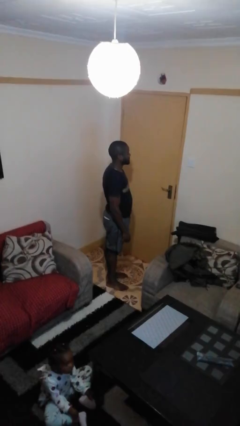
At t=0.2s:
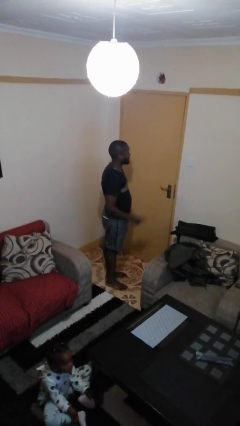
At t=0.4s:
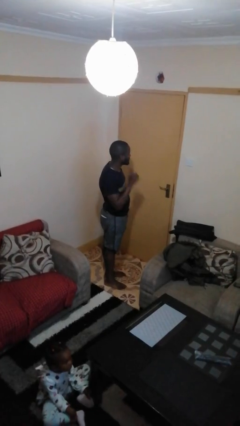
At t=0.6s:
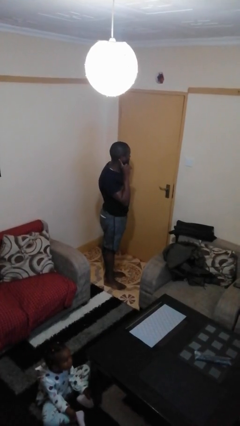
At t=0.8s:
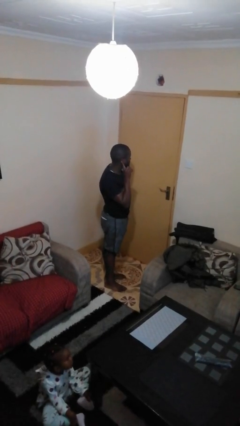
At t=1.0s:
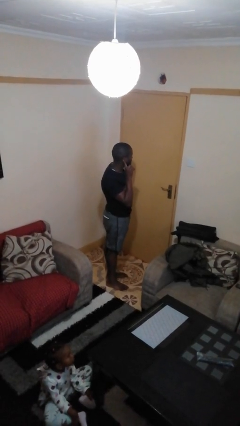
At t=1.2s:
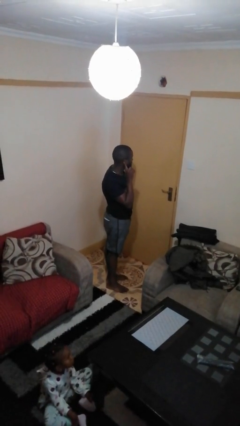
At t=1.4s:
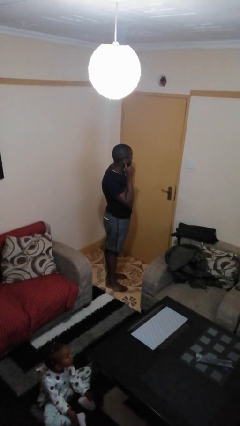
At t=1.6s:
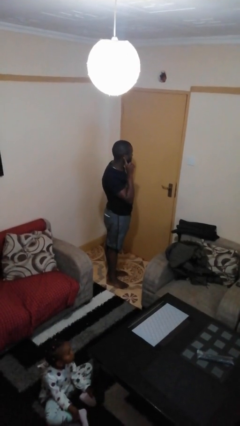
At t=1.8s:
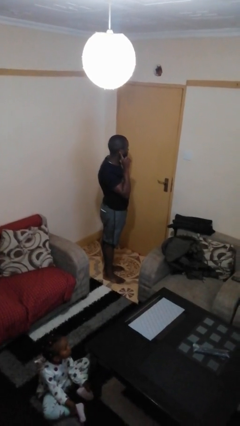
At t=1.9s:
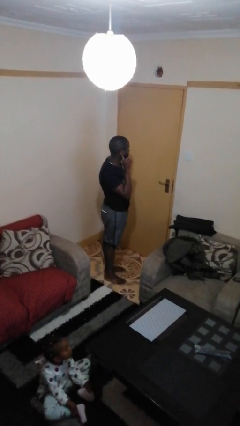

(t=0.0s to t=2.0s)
person gestures listen closely

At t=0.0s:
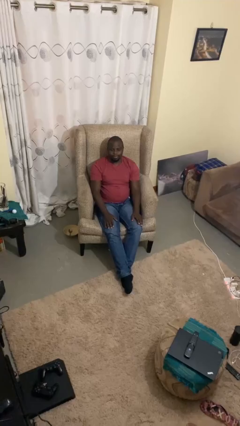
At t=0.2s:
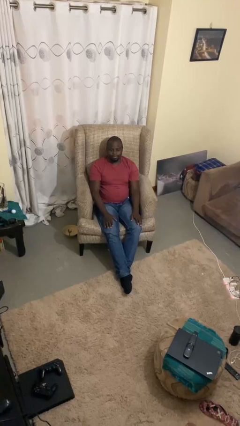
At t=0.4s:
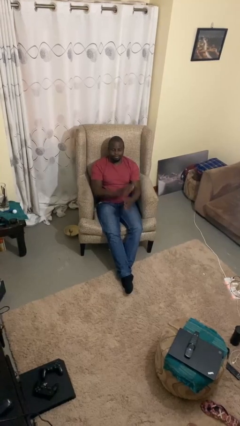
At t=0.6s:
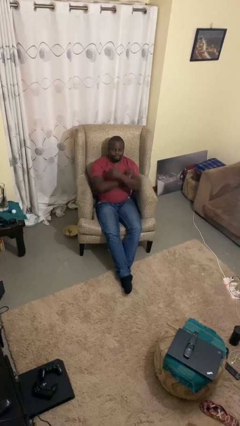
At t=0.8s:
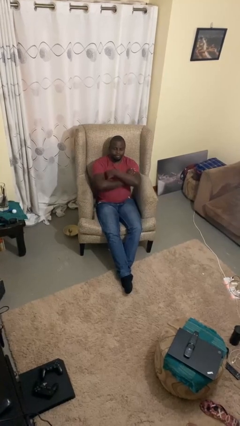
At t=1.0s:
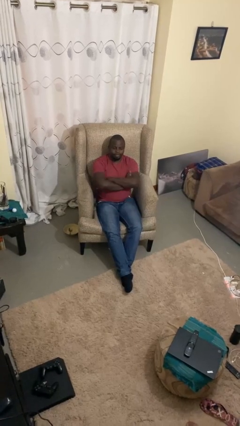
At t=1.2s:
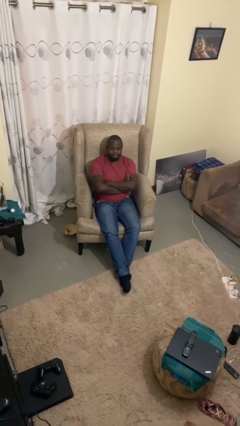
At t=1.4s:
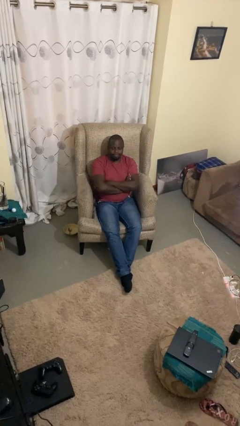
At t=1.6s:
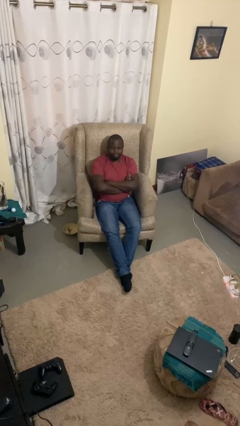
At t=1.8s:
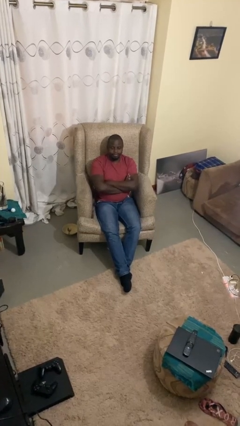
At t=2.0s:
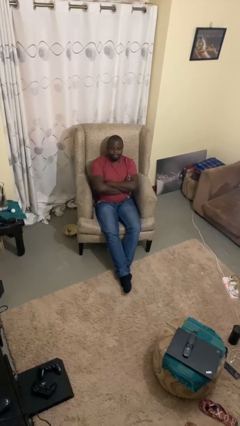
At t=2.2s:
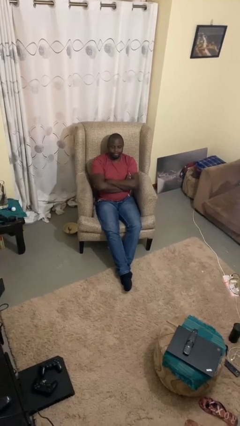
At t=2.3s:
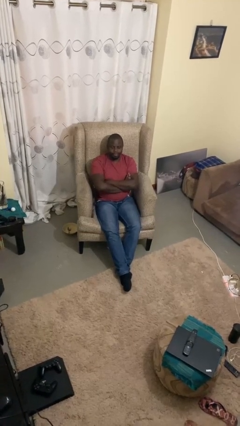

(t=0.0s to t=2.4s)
person crosses arms

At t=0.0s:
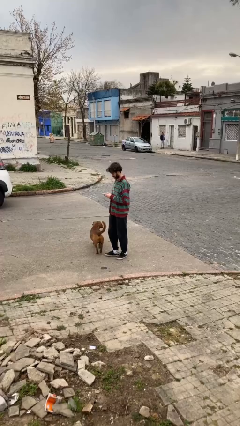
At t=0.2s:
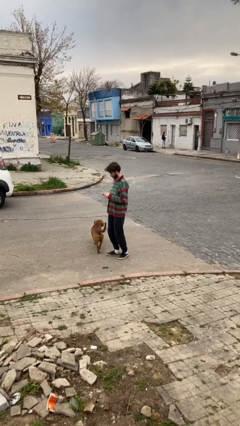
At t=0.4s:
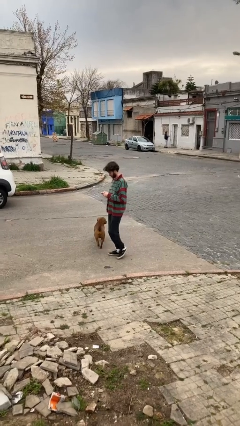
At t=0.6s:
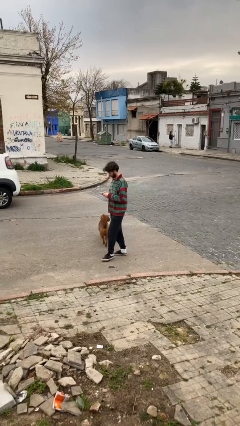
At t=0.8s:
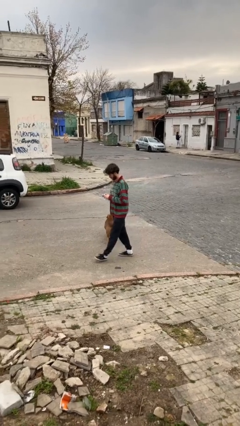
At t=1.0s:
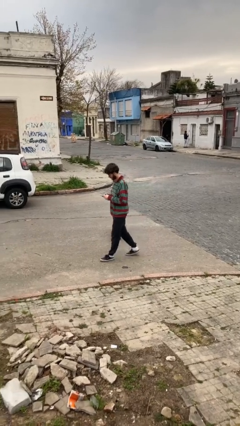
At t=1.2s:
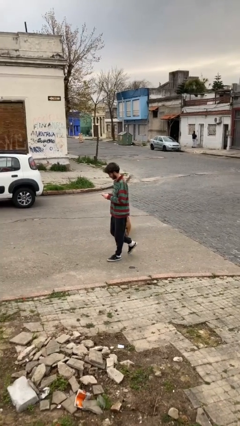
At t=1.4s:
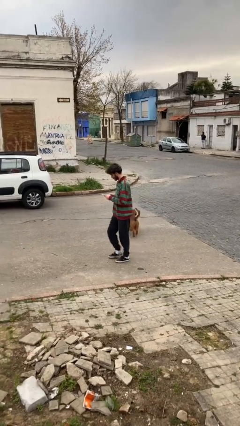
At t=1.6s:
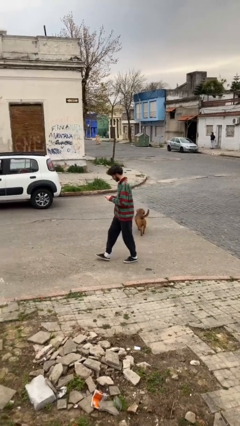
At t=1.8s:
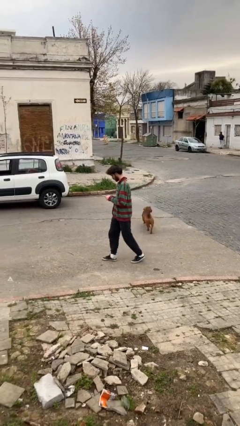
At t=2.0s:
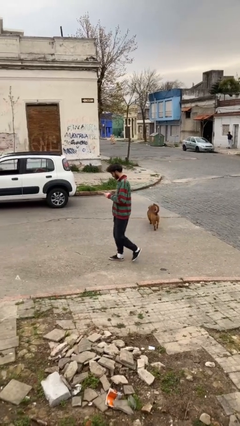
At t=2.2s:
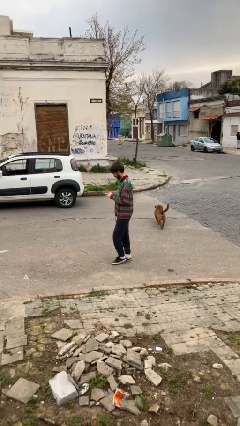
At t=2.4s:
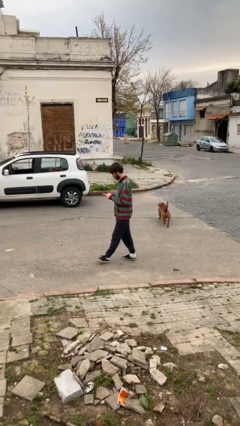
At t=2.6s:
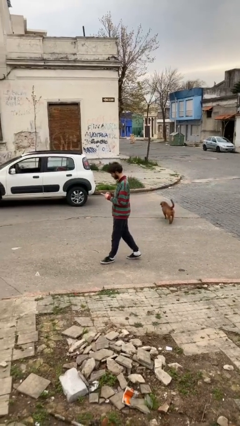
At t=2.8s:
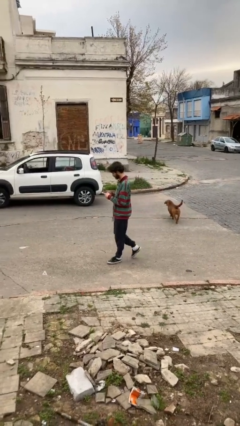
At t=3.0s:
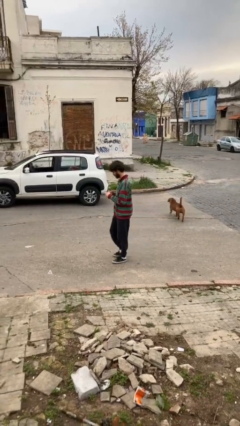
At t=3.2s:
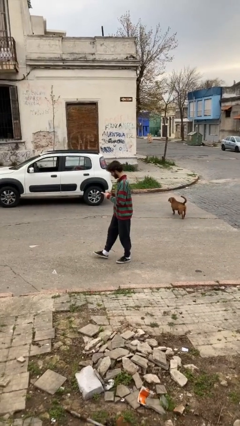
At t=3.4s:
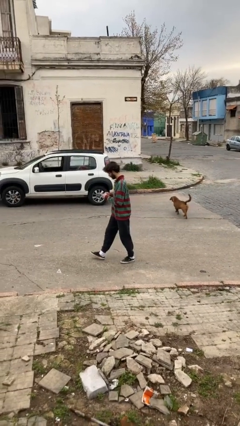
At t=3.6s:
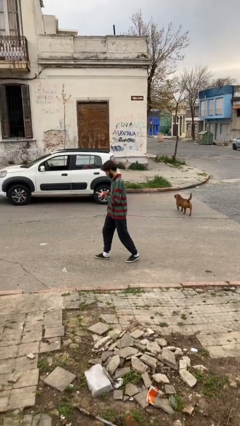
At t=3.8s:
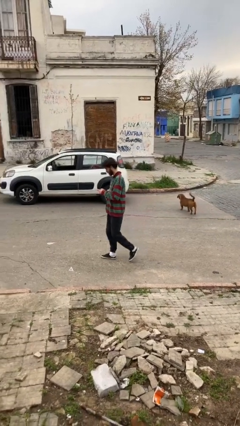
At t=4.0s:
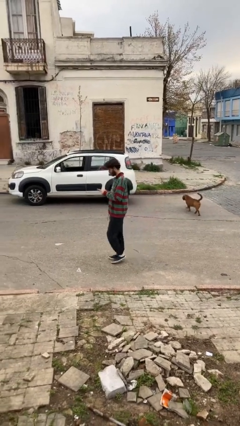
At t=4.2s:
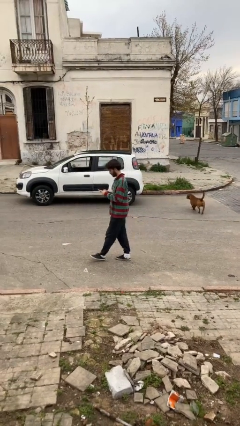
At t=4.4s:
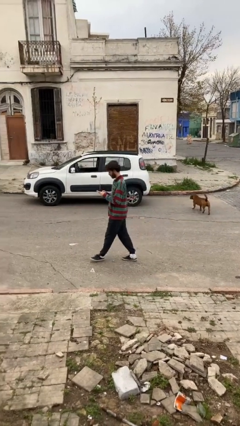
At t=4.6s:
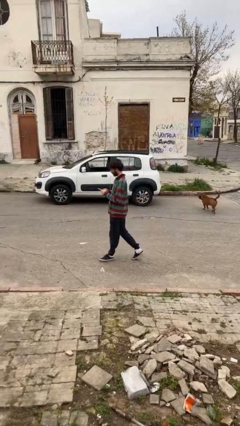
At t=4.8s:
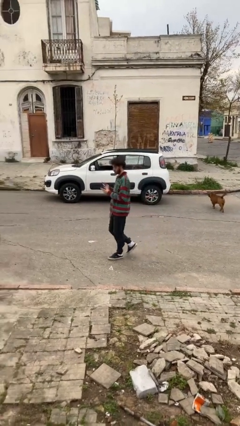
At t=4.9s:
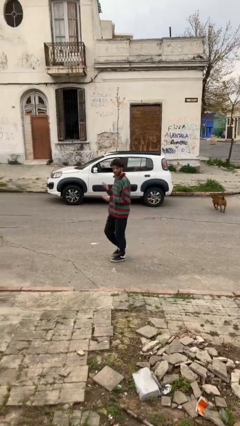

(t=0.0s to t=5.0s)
person texts on phone

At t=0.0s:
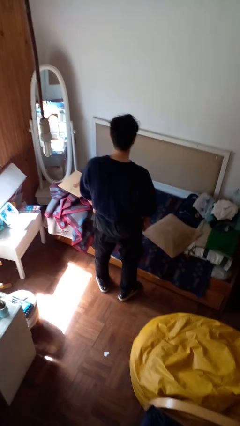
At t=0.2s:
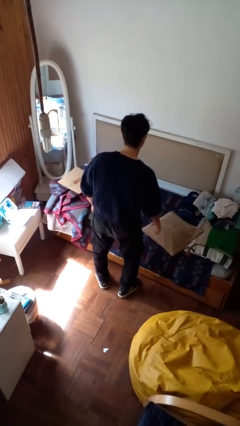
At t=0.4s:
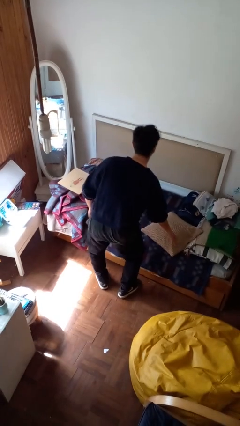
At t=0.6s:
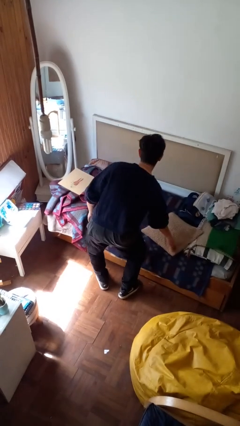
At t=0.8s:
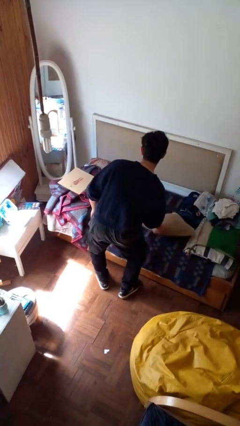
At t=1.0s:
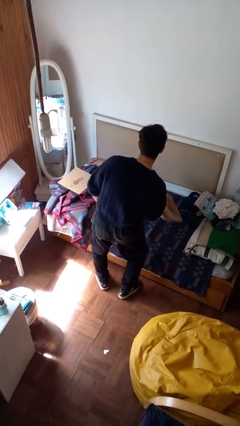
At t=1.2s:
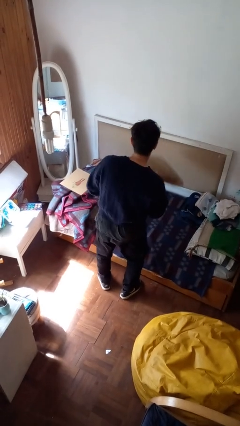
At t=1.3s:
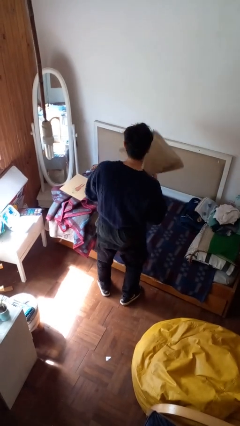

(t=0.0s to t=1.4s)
person picks up object from bed

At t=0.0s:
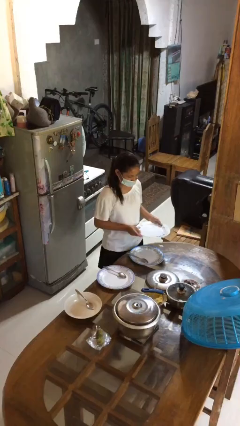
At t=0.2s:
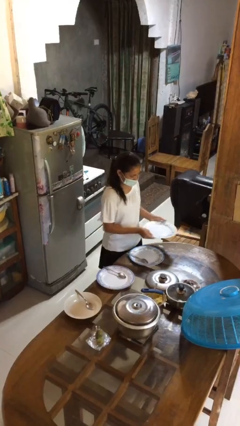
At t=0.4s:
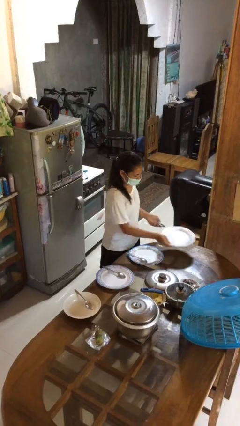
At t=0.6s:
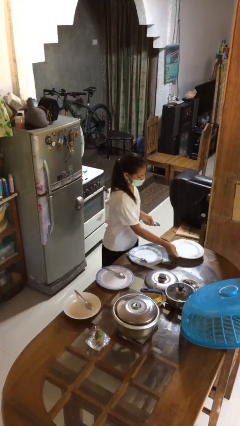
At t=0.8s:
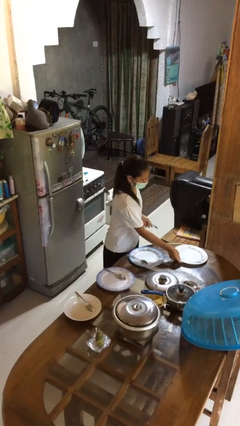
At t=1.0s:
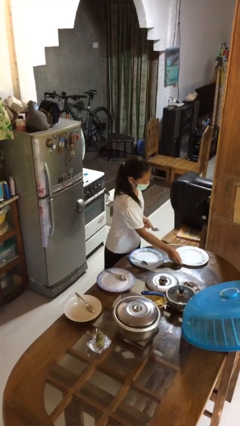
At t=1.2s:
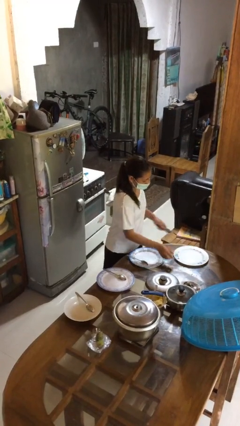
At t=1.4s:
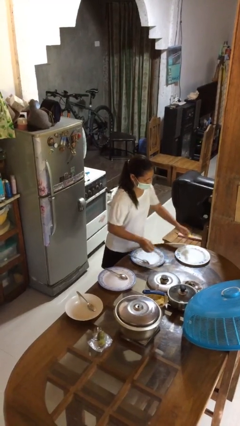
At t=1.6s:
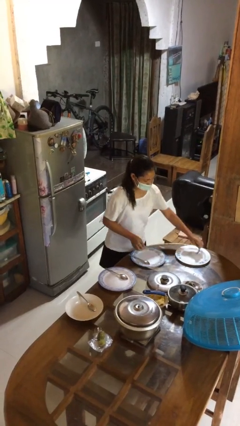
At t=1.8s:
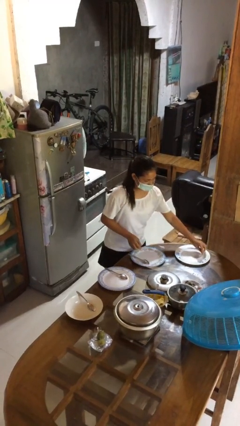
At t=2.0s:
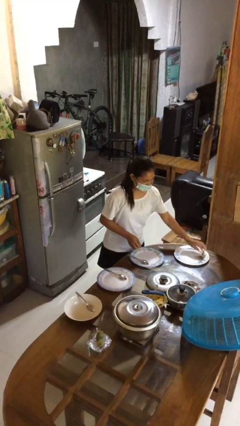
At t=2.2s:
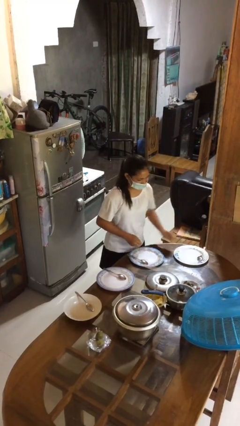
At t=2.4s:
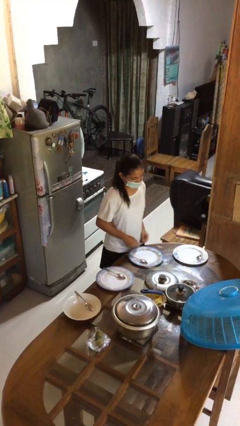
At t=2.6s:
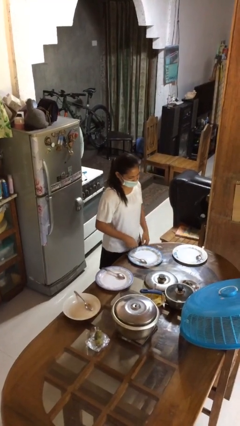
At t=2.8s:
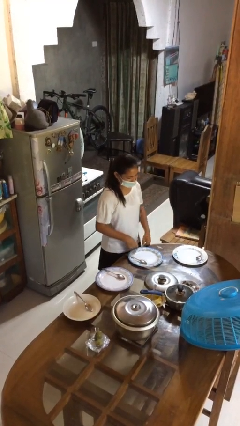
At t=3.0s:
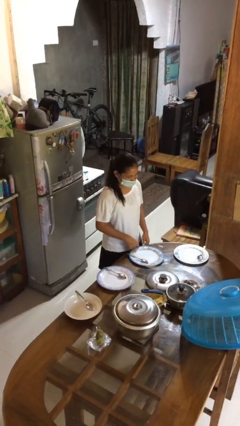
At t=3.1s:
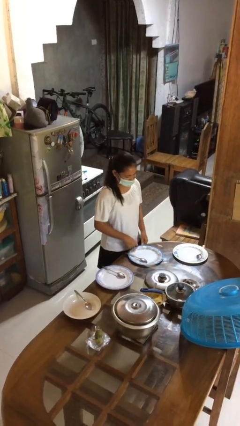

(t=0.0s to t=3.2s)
person sets table

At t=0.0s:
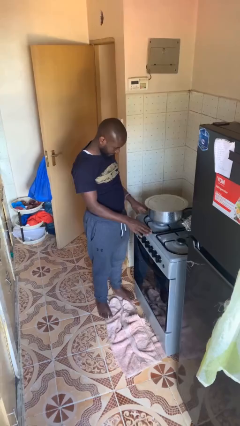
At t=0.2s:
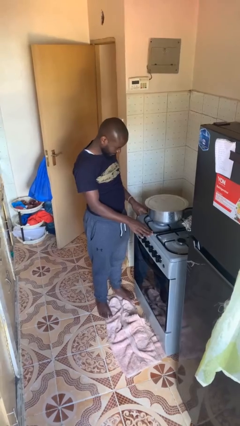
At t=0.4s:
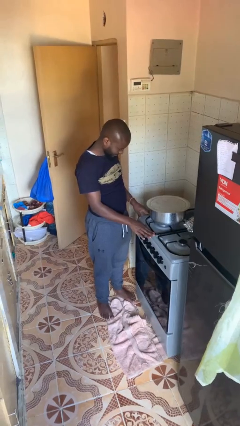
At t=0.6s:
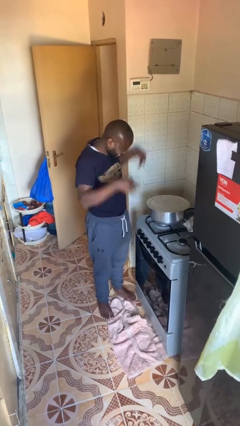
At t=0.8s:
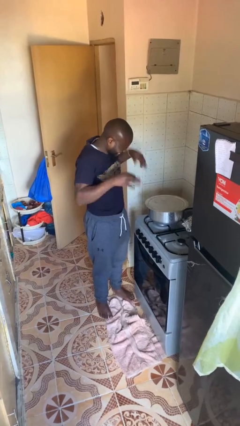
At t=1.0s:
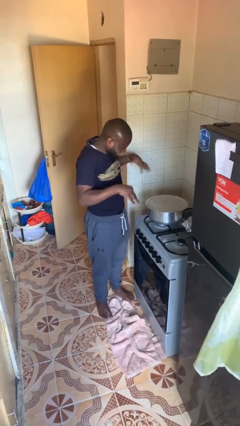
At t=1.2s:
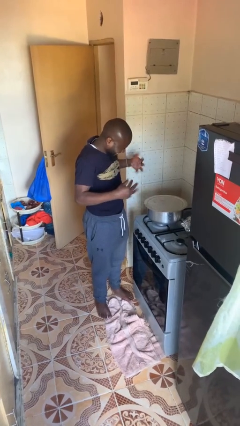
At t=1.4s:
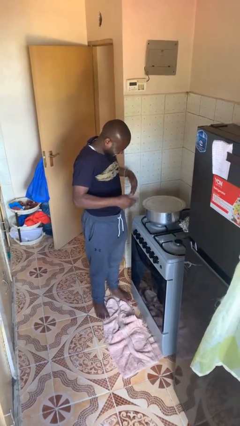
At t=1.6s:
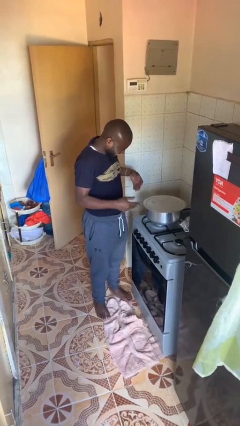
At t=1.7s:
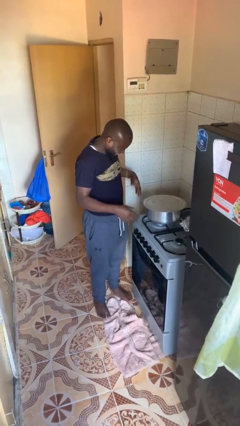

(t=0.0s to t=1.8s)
person burns hand

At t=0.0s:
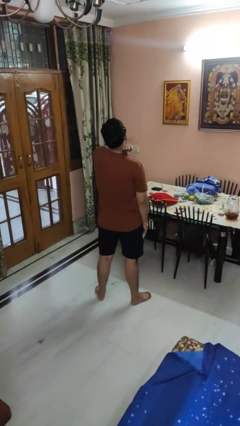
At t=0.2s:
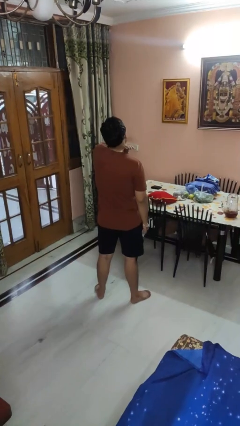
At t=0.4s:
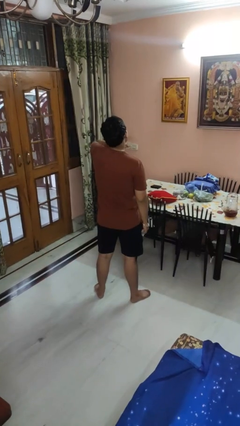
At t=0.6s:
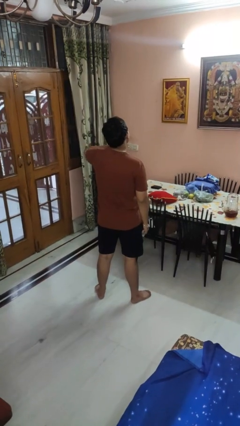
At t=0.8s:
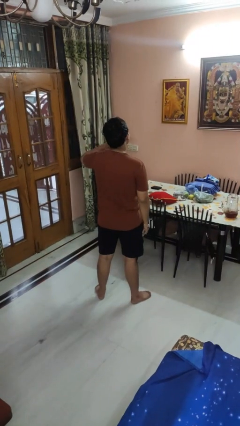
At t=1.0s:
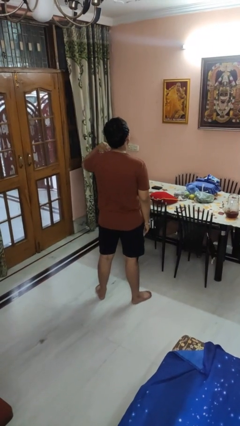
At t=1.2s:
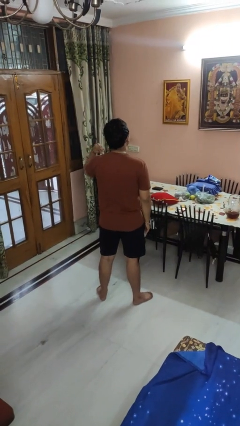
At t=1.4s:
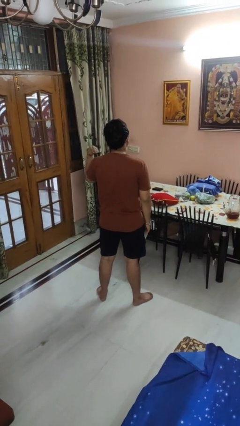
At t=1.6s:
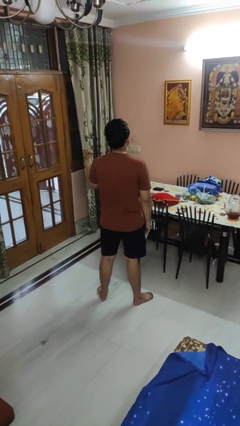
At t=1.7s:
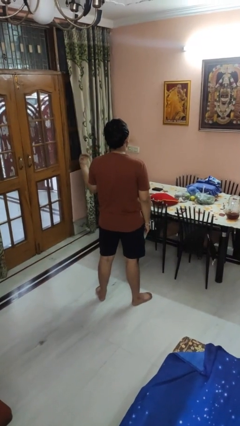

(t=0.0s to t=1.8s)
person gestures cut
